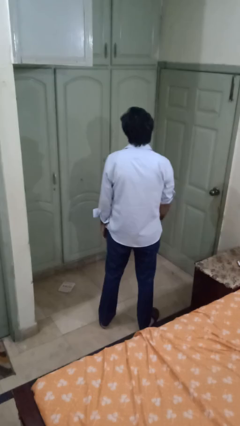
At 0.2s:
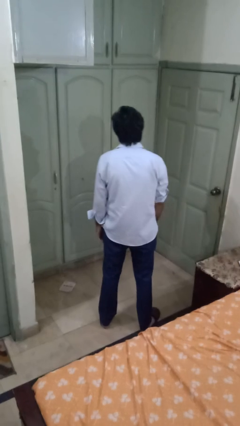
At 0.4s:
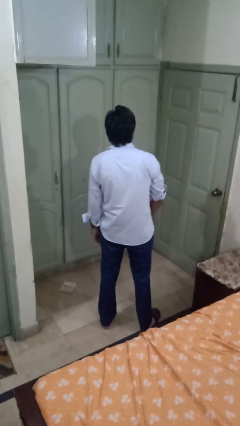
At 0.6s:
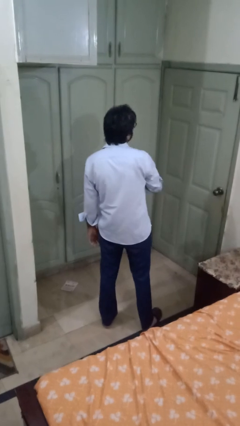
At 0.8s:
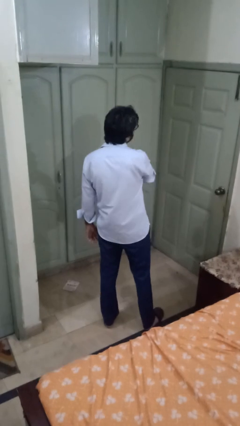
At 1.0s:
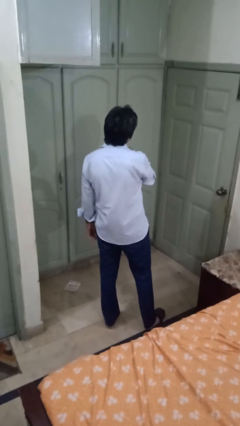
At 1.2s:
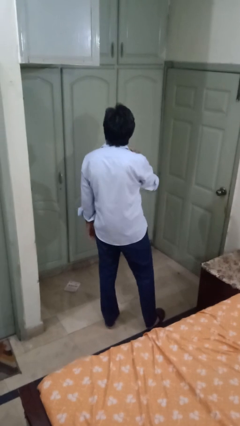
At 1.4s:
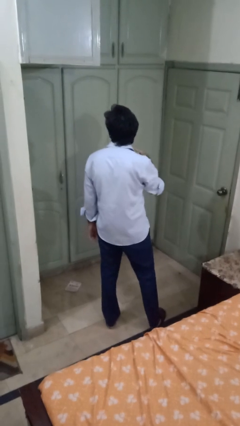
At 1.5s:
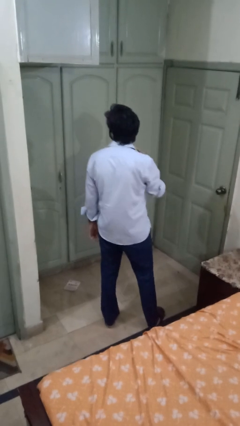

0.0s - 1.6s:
person gestures cut

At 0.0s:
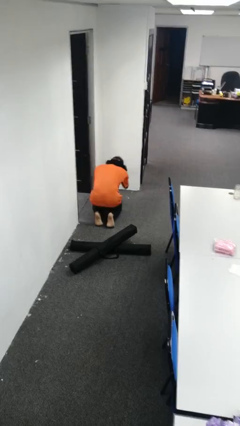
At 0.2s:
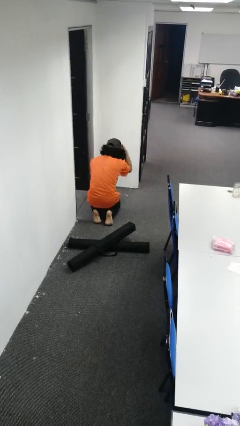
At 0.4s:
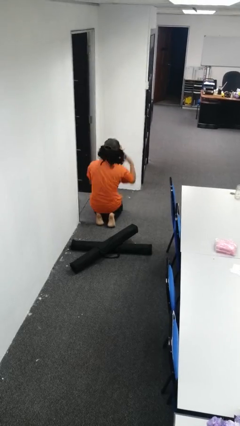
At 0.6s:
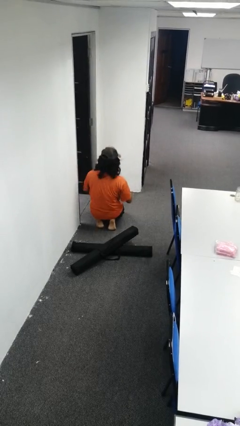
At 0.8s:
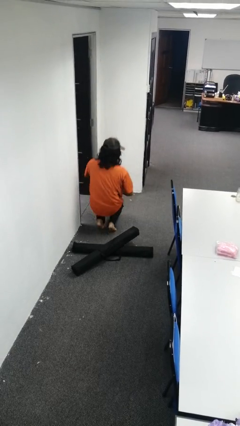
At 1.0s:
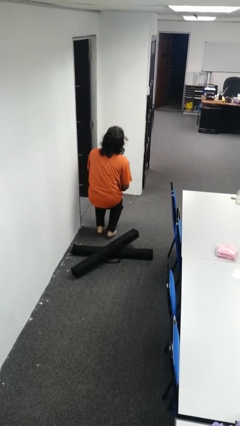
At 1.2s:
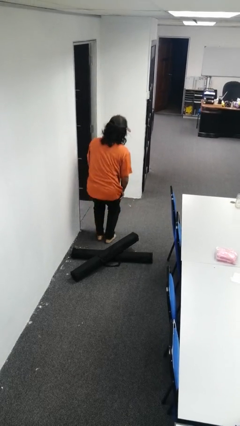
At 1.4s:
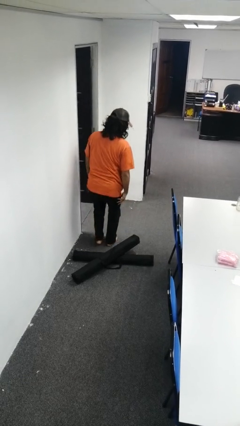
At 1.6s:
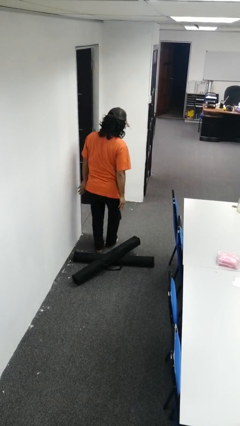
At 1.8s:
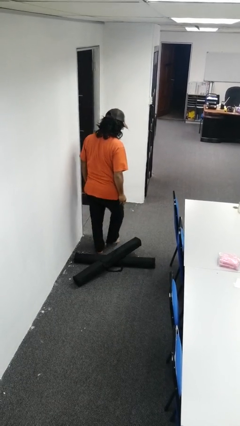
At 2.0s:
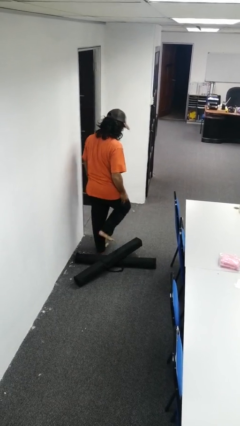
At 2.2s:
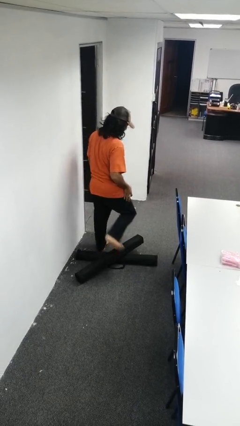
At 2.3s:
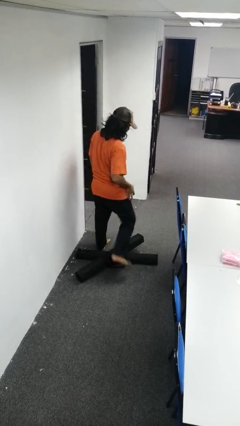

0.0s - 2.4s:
person stands up from floor

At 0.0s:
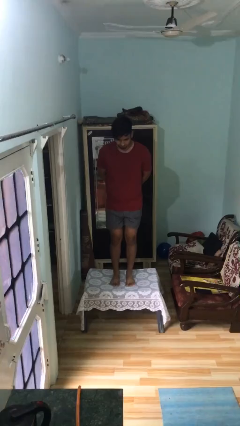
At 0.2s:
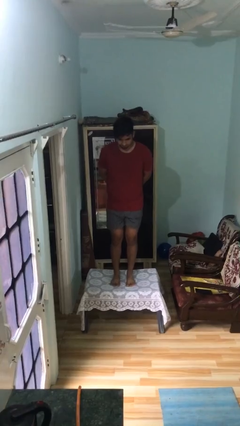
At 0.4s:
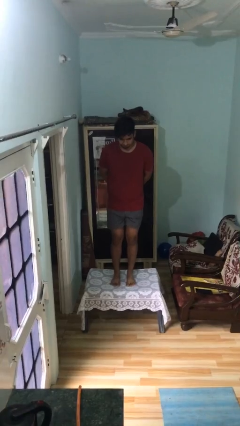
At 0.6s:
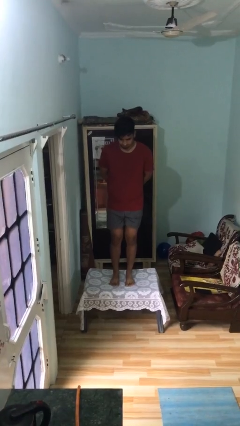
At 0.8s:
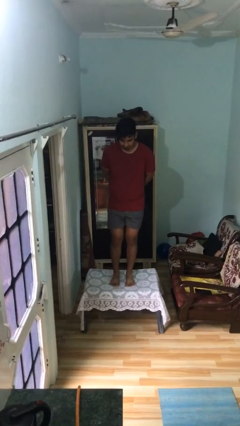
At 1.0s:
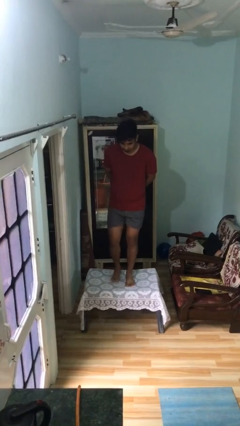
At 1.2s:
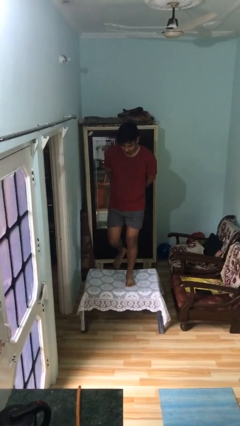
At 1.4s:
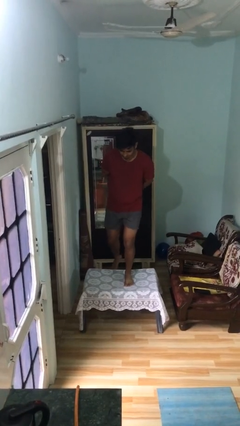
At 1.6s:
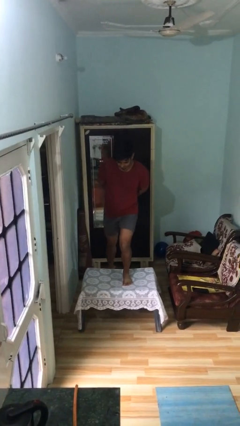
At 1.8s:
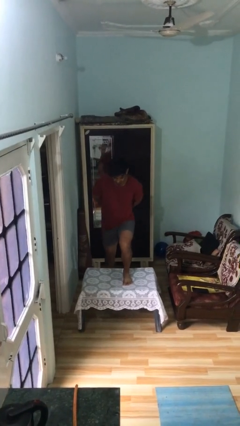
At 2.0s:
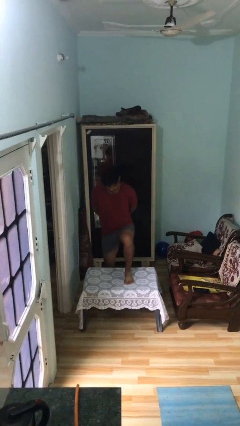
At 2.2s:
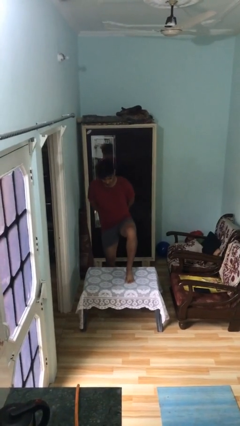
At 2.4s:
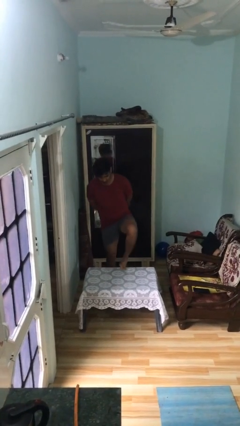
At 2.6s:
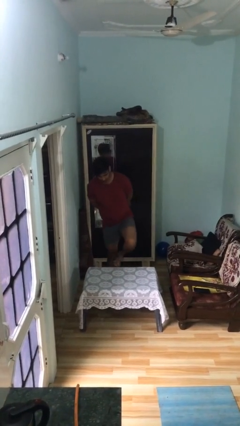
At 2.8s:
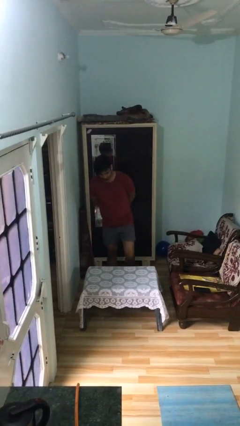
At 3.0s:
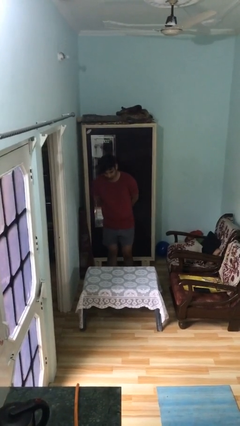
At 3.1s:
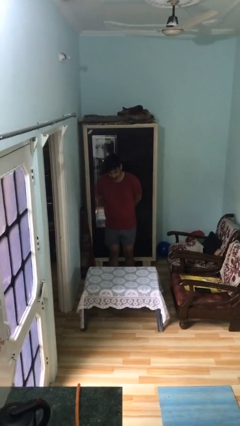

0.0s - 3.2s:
person climbs off table

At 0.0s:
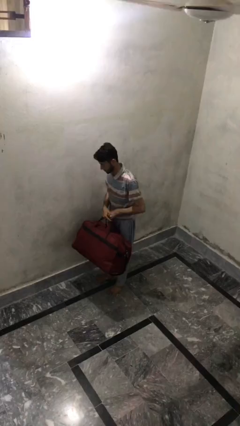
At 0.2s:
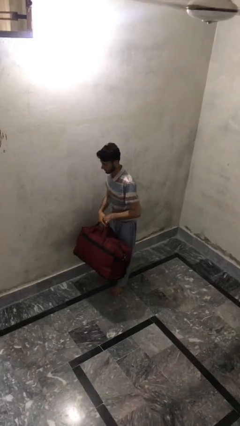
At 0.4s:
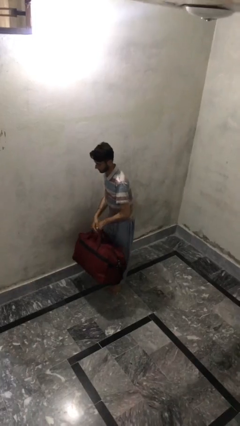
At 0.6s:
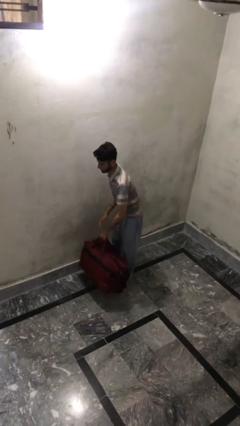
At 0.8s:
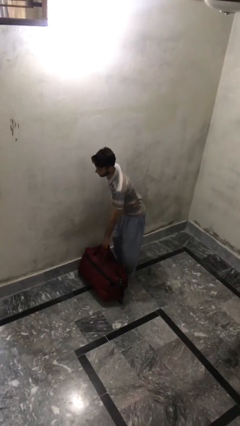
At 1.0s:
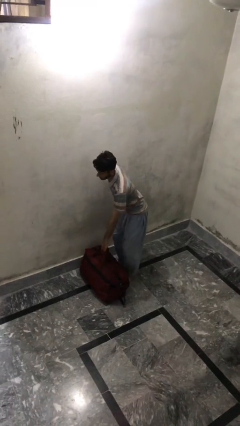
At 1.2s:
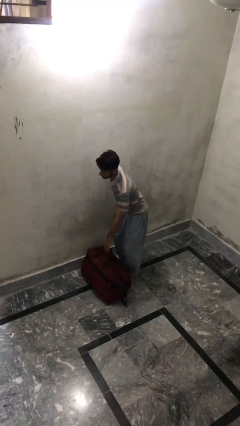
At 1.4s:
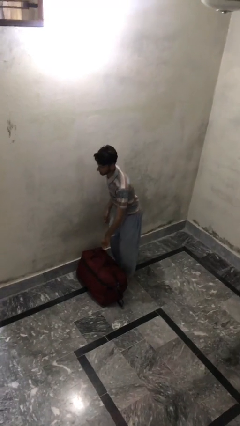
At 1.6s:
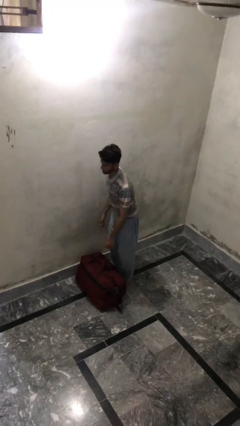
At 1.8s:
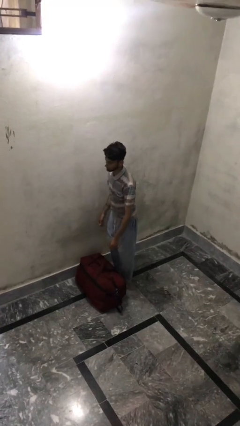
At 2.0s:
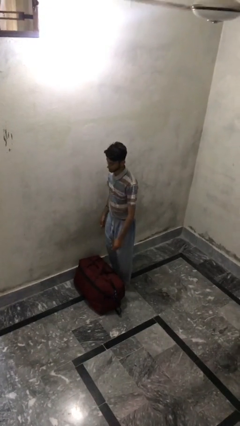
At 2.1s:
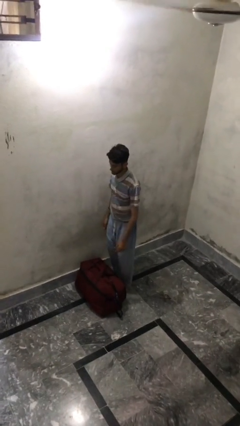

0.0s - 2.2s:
person puts down object on floor

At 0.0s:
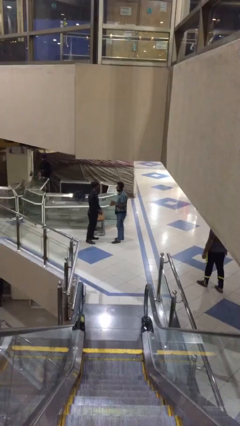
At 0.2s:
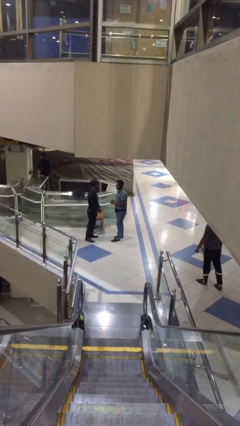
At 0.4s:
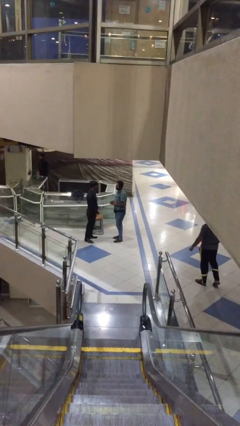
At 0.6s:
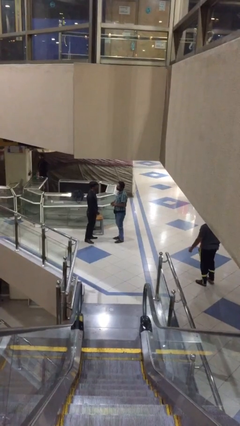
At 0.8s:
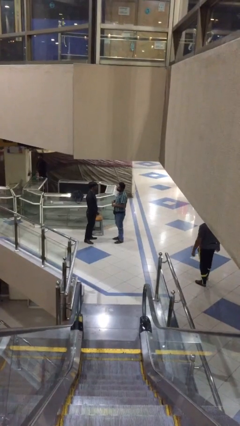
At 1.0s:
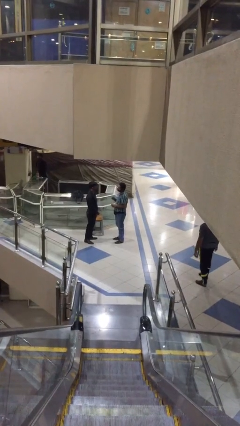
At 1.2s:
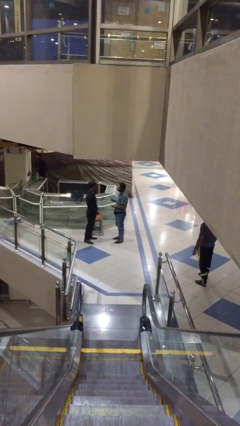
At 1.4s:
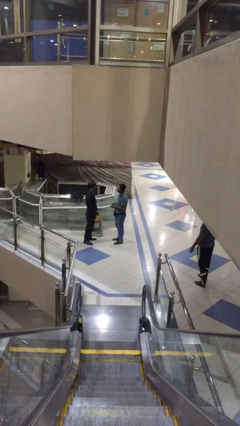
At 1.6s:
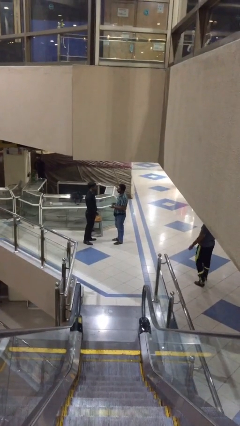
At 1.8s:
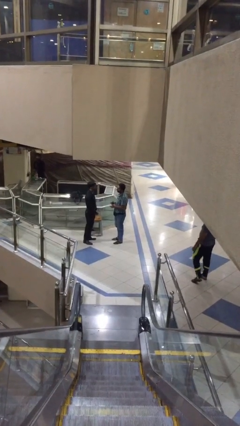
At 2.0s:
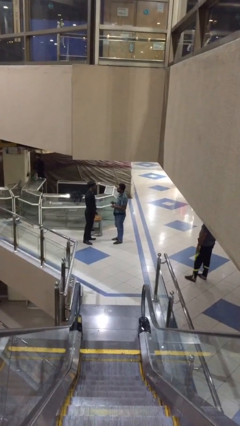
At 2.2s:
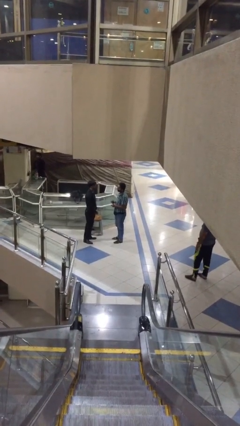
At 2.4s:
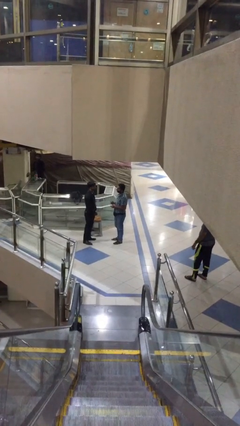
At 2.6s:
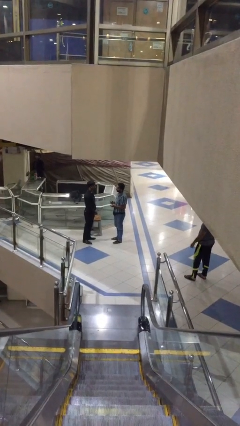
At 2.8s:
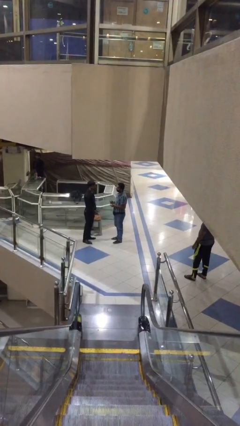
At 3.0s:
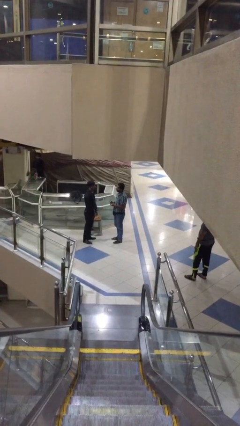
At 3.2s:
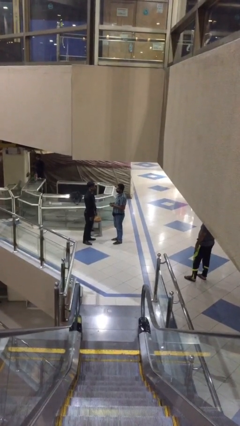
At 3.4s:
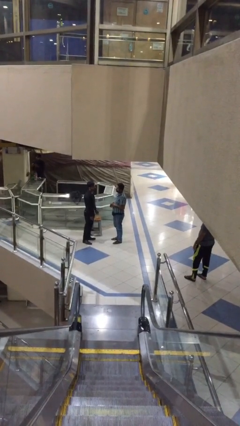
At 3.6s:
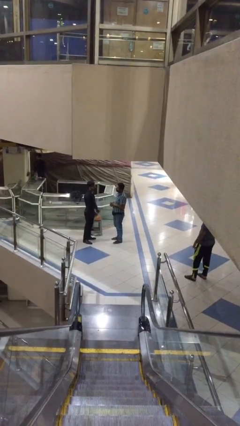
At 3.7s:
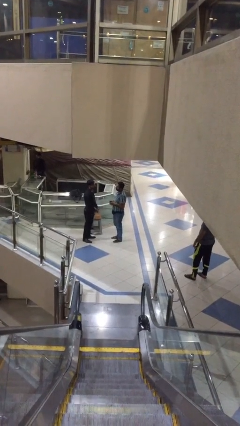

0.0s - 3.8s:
person talks to person

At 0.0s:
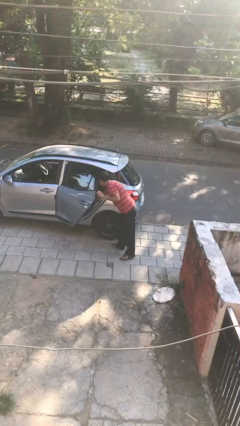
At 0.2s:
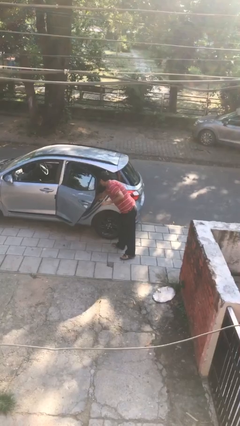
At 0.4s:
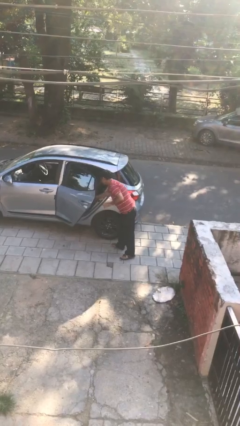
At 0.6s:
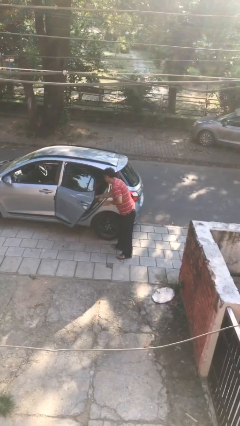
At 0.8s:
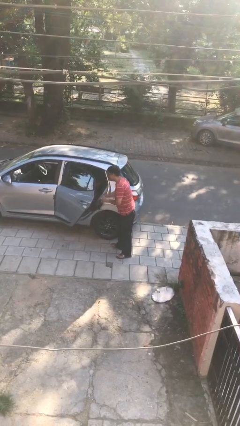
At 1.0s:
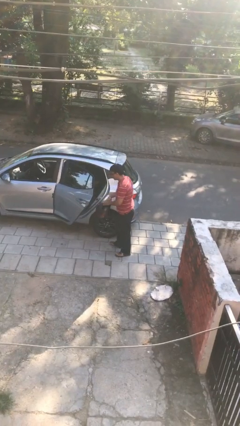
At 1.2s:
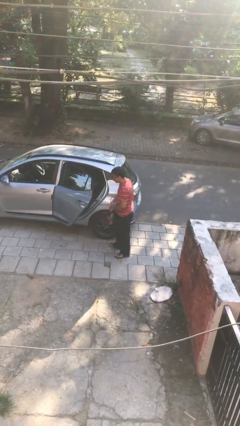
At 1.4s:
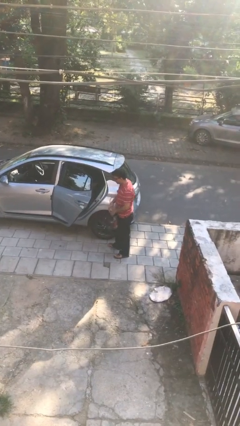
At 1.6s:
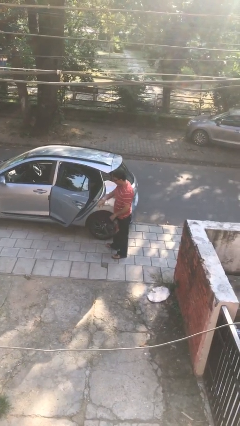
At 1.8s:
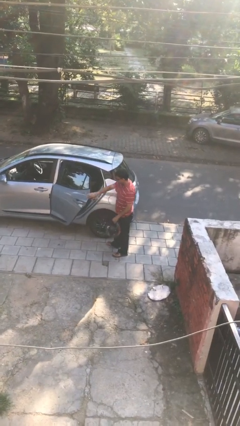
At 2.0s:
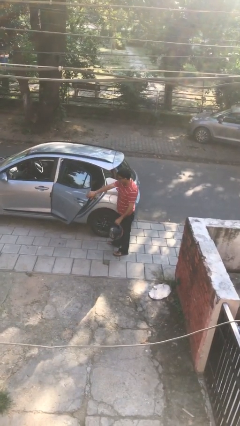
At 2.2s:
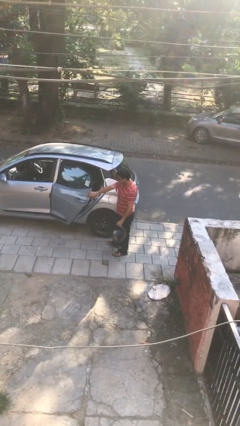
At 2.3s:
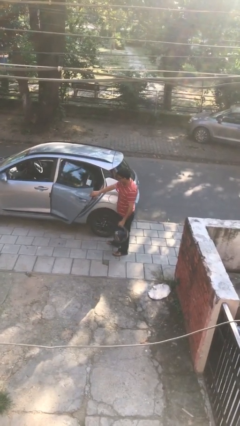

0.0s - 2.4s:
person unloads car

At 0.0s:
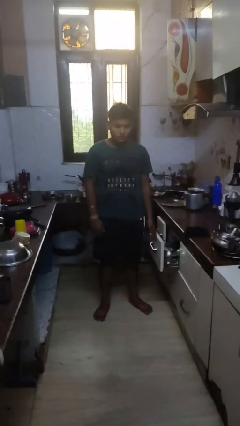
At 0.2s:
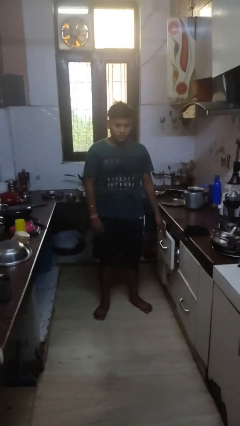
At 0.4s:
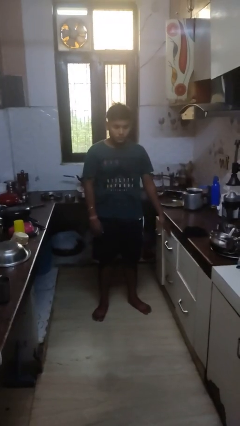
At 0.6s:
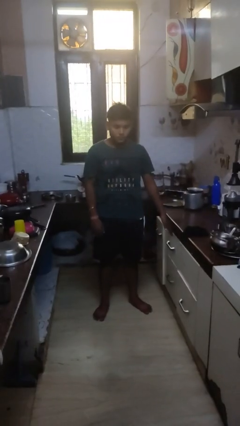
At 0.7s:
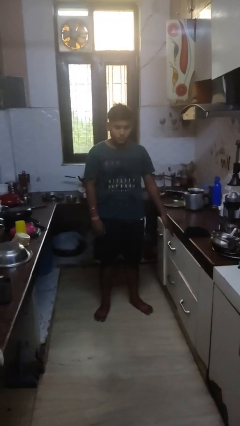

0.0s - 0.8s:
person closes kitchen drawer

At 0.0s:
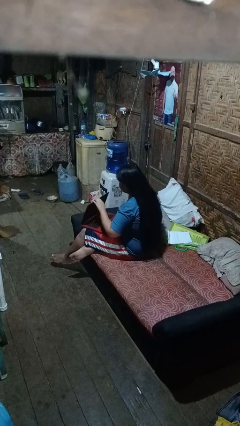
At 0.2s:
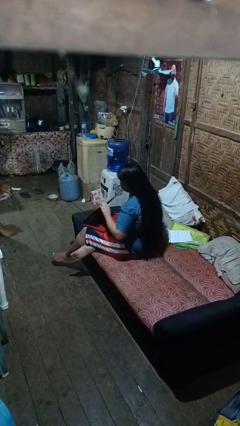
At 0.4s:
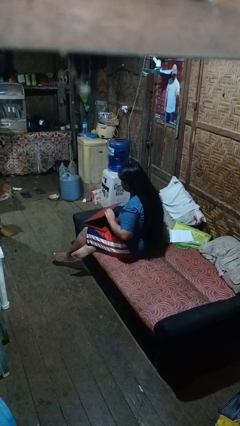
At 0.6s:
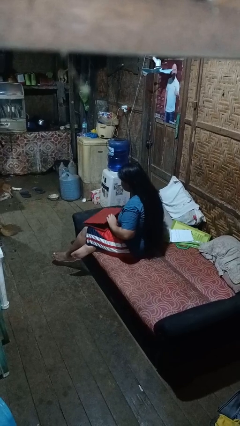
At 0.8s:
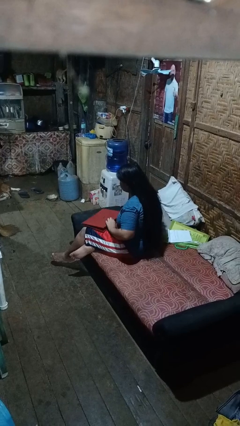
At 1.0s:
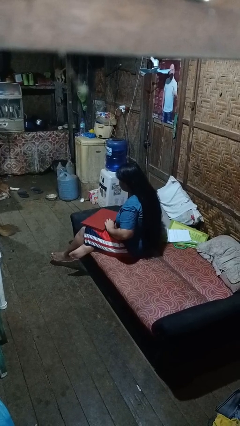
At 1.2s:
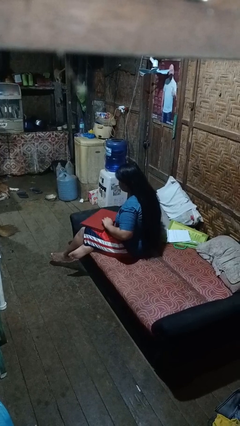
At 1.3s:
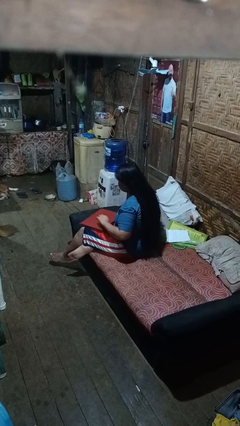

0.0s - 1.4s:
person closes laptop
